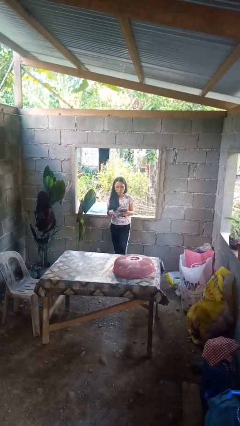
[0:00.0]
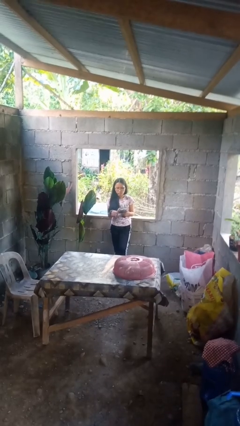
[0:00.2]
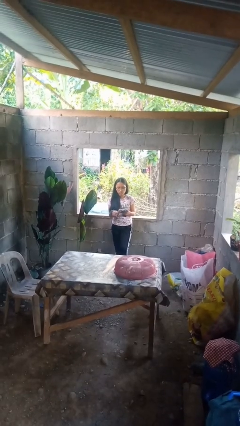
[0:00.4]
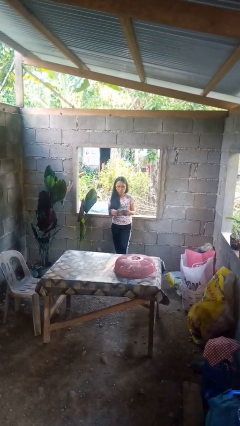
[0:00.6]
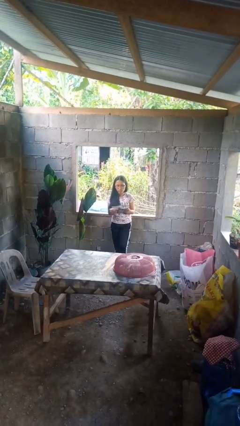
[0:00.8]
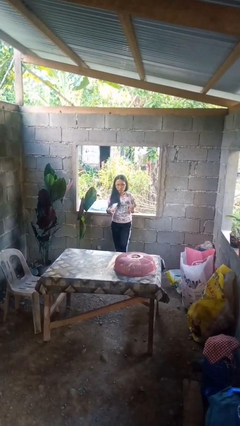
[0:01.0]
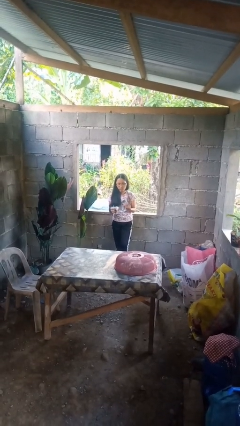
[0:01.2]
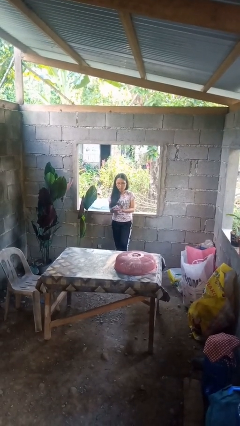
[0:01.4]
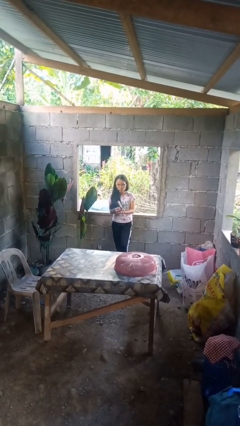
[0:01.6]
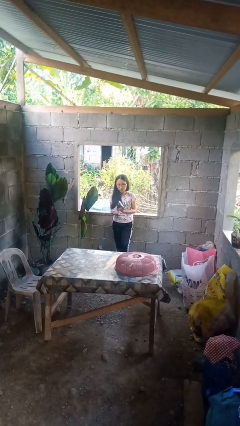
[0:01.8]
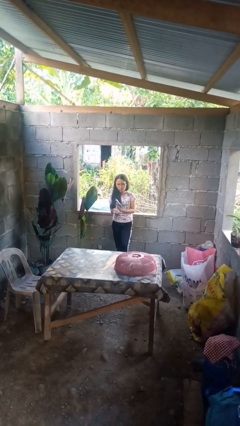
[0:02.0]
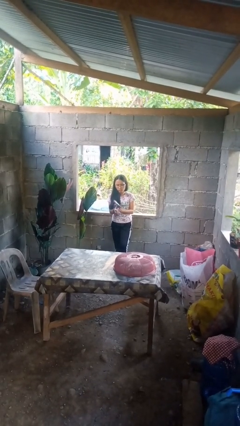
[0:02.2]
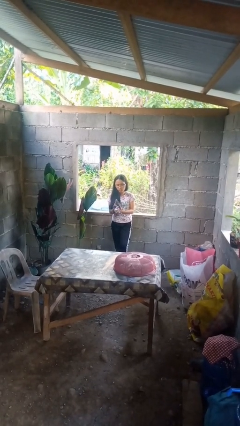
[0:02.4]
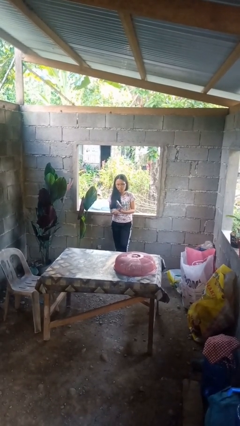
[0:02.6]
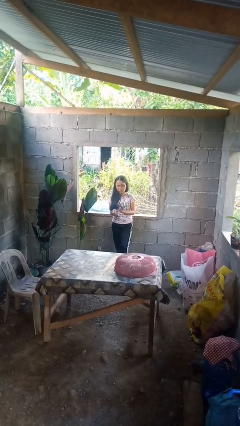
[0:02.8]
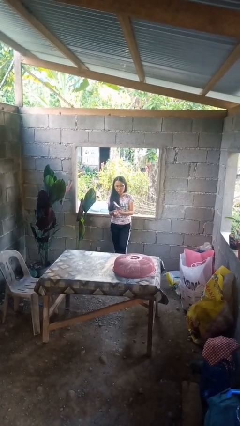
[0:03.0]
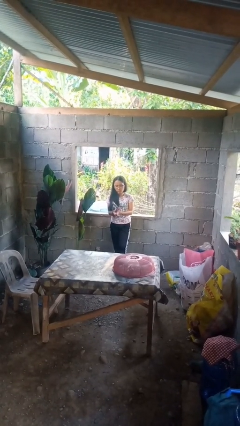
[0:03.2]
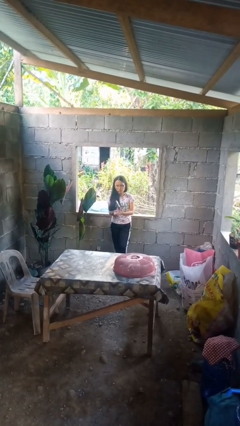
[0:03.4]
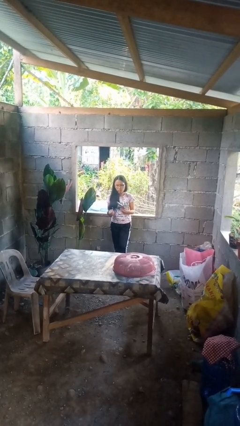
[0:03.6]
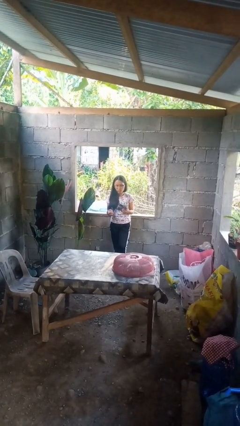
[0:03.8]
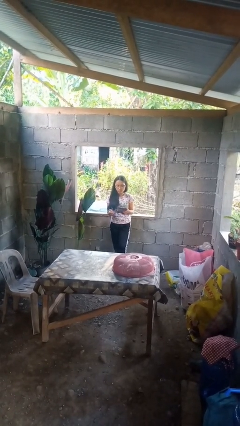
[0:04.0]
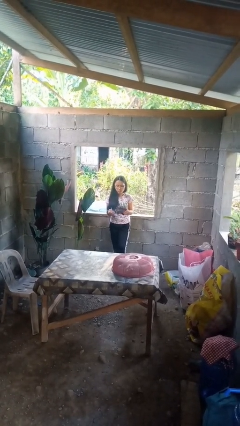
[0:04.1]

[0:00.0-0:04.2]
person crumples paper

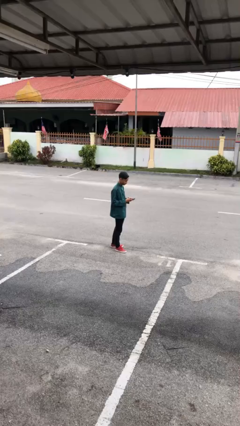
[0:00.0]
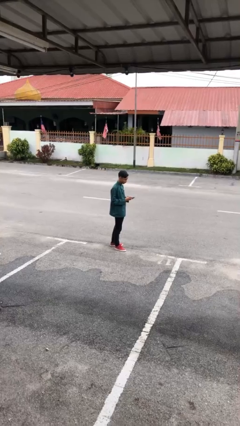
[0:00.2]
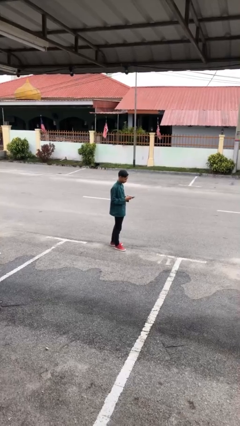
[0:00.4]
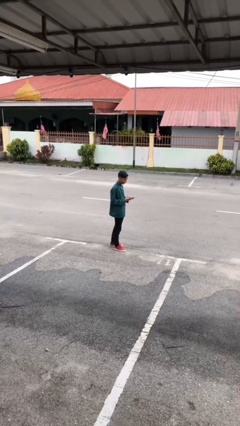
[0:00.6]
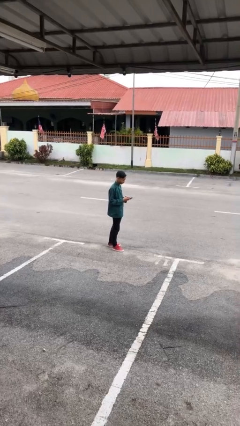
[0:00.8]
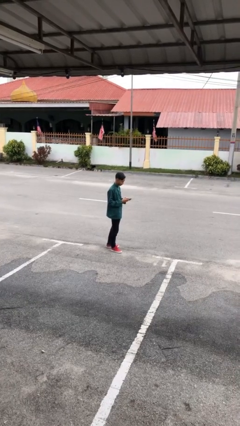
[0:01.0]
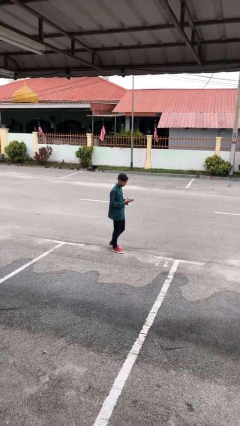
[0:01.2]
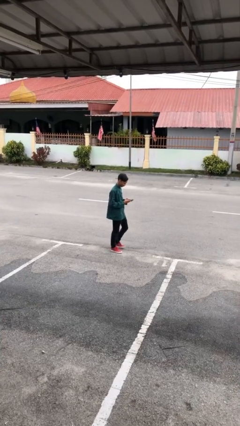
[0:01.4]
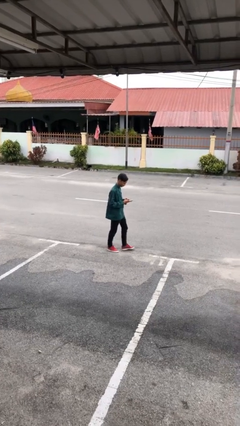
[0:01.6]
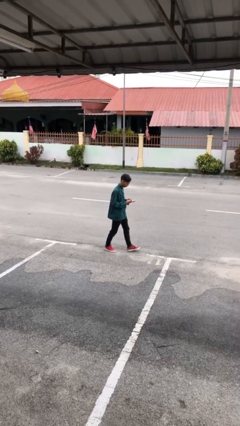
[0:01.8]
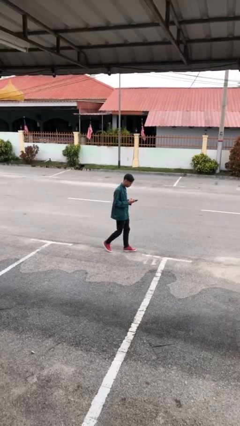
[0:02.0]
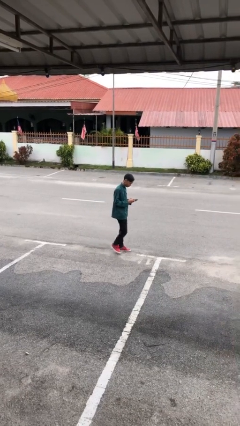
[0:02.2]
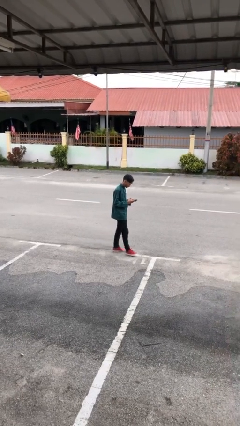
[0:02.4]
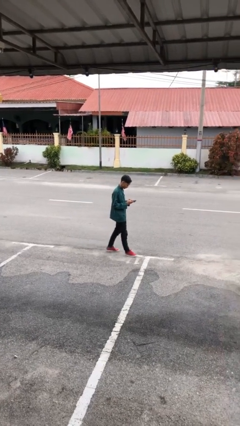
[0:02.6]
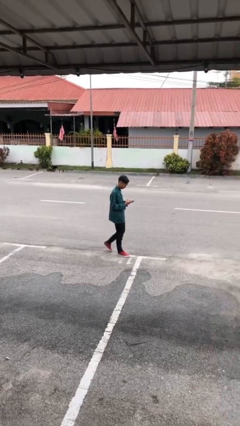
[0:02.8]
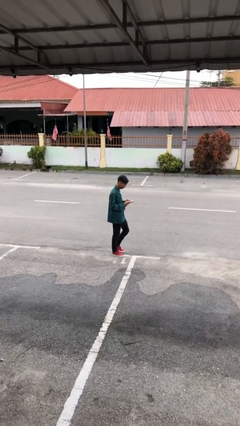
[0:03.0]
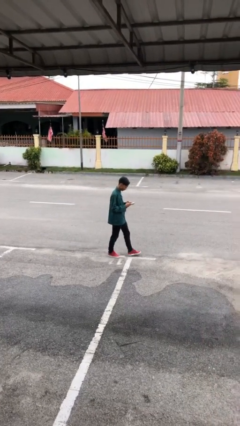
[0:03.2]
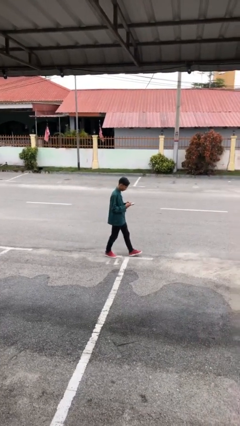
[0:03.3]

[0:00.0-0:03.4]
person texts on phone

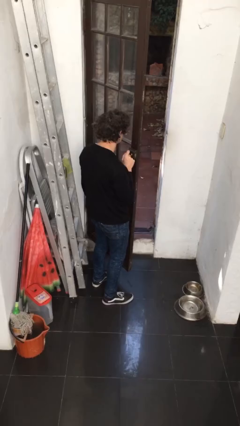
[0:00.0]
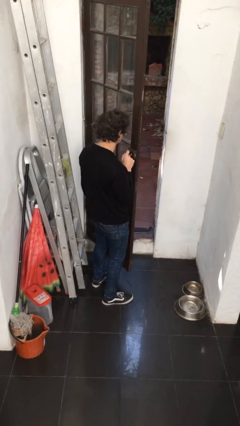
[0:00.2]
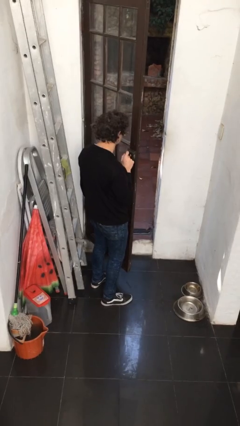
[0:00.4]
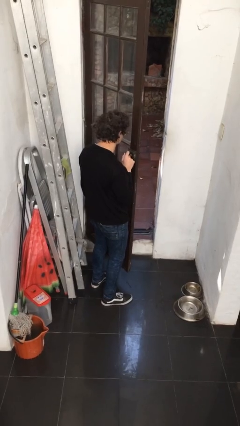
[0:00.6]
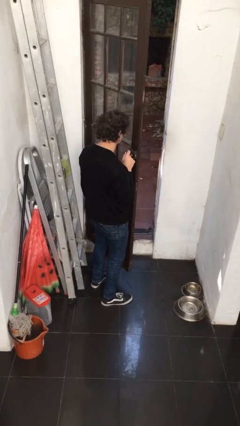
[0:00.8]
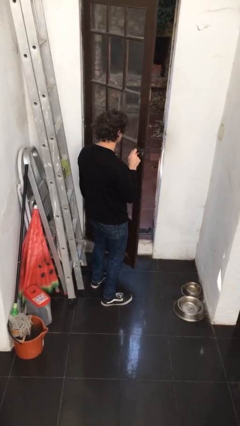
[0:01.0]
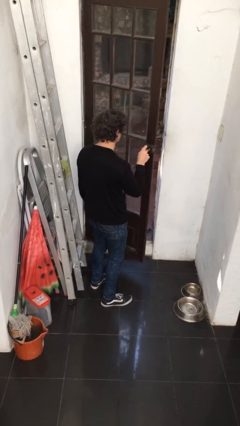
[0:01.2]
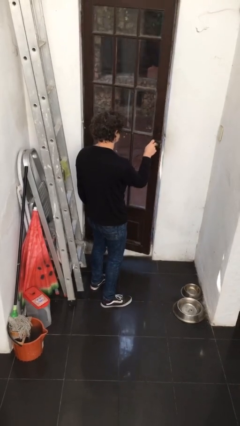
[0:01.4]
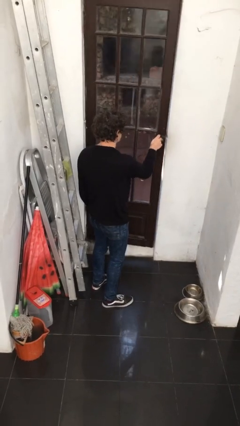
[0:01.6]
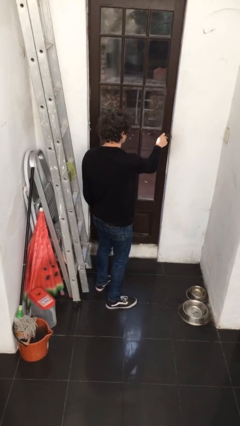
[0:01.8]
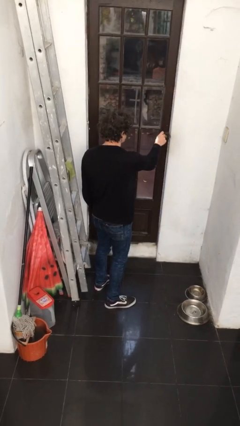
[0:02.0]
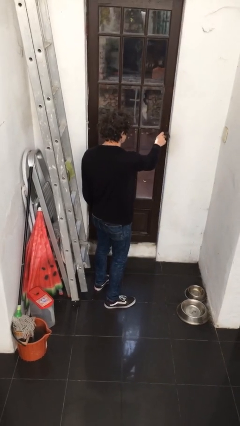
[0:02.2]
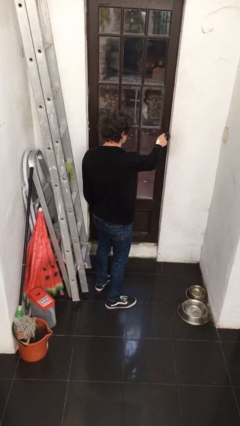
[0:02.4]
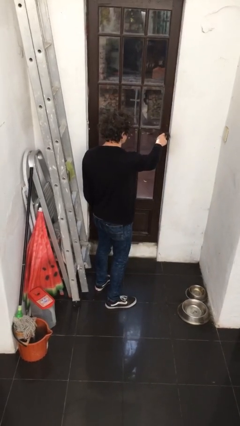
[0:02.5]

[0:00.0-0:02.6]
person closes facility door

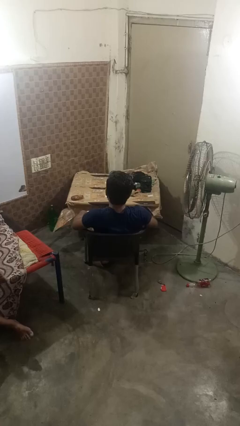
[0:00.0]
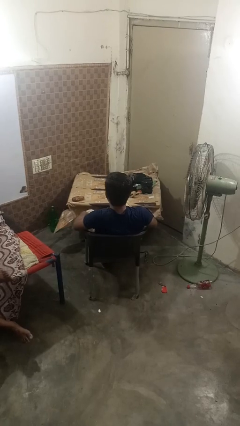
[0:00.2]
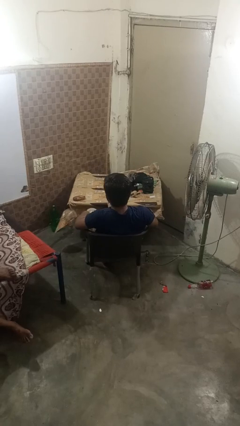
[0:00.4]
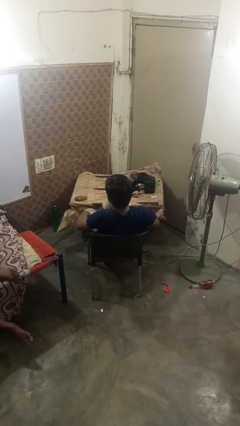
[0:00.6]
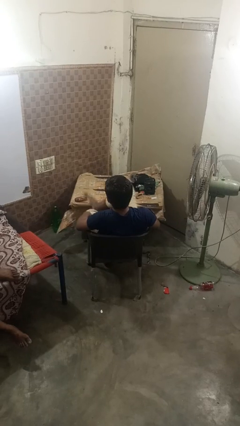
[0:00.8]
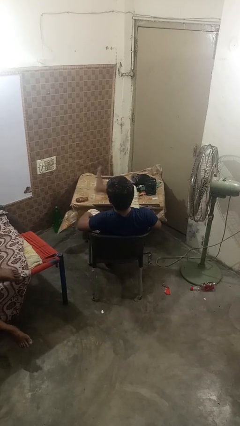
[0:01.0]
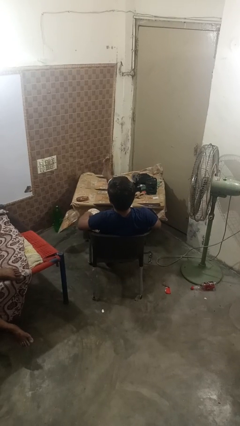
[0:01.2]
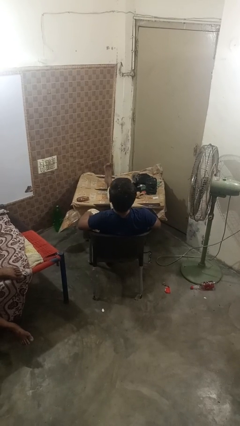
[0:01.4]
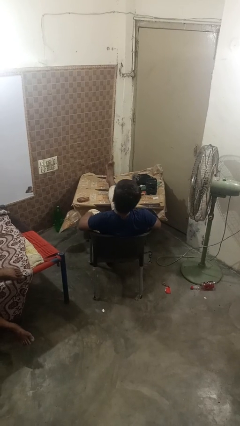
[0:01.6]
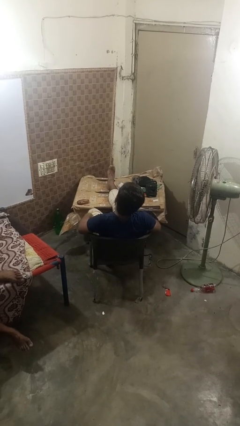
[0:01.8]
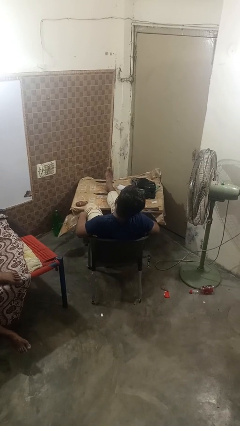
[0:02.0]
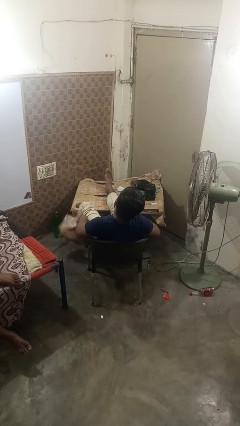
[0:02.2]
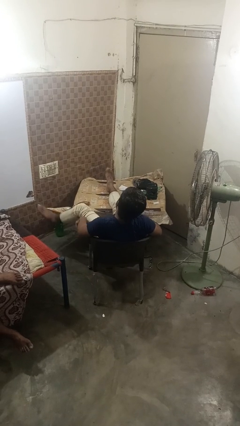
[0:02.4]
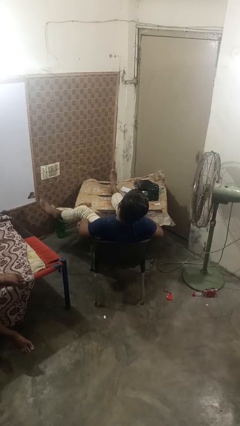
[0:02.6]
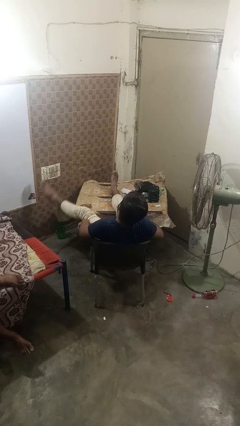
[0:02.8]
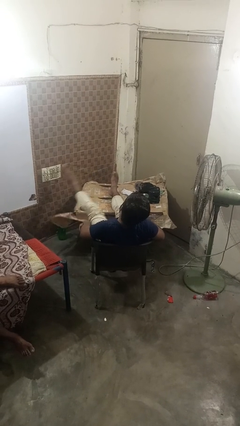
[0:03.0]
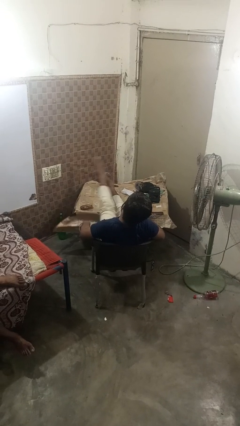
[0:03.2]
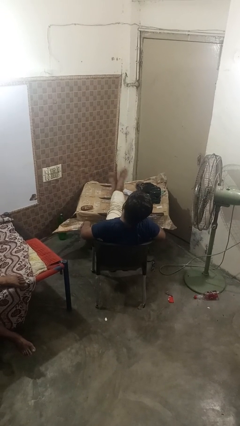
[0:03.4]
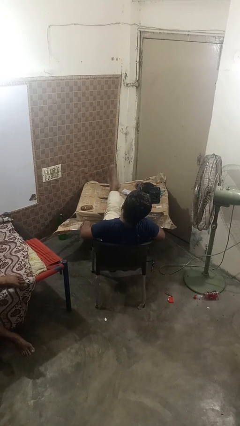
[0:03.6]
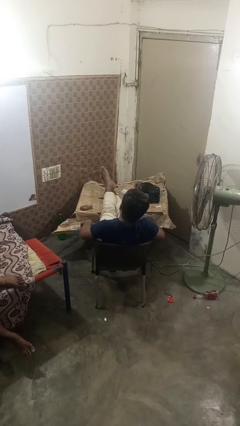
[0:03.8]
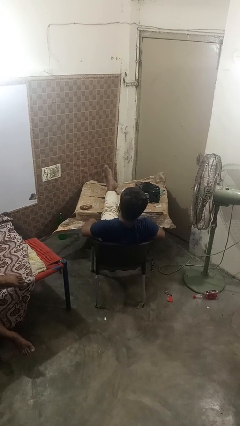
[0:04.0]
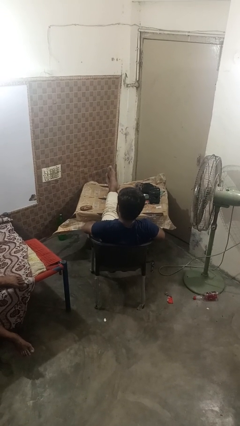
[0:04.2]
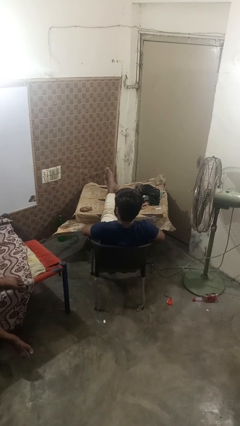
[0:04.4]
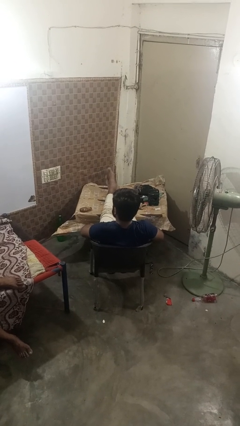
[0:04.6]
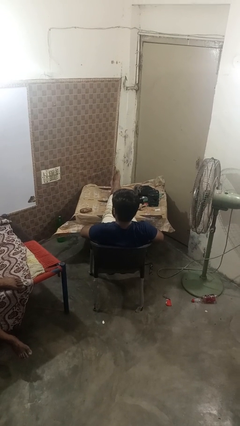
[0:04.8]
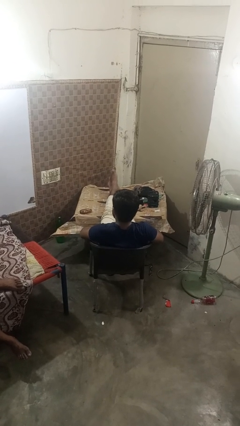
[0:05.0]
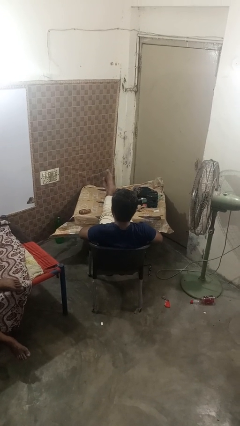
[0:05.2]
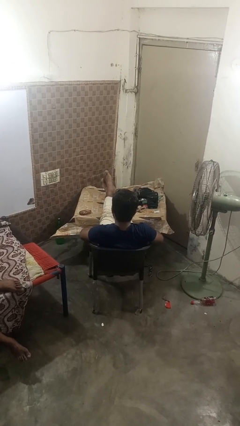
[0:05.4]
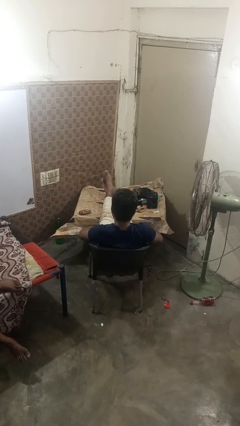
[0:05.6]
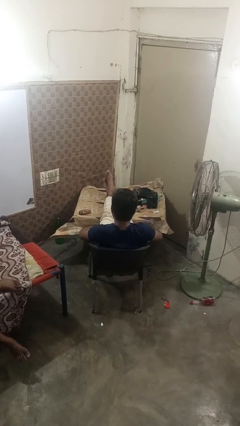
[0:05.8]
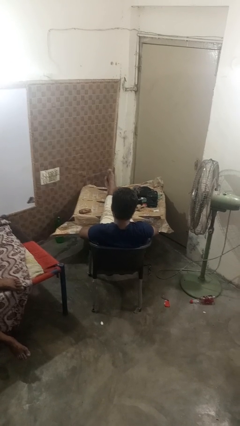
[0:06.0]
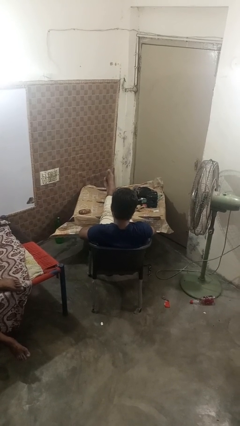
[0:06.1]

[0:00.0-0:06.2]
person puts feet up

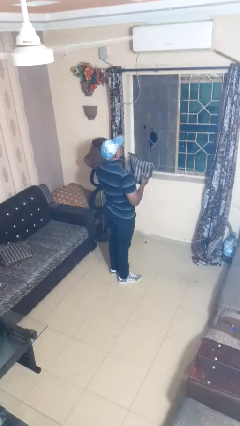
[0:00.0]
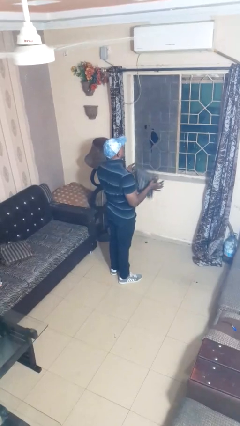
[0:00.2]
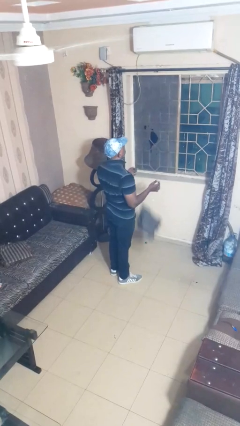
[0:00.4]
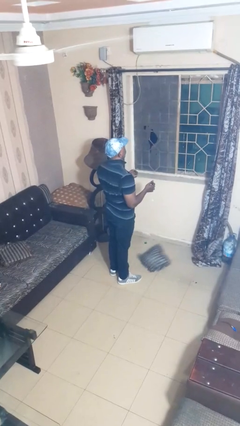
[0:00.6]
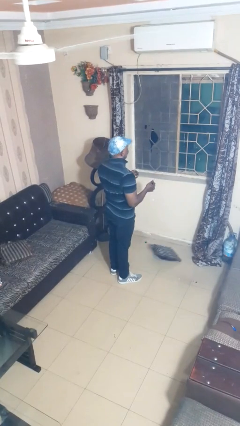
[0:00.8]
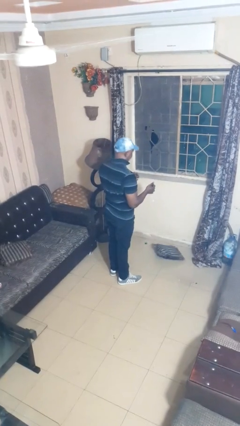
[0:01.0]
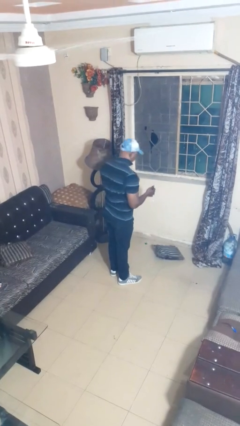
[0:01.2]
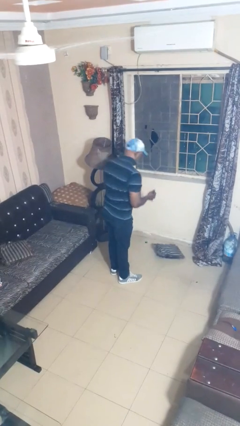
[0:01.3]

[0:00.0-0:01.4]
person catches dropped object
